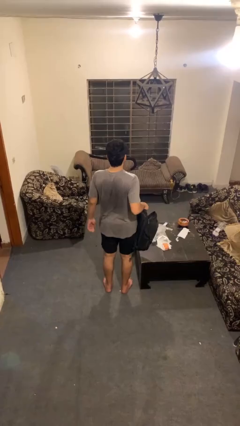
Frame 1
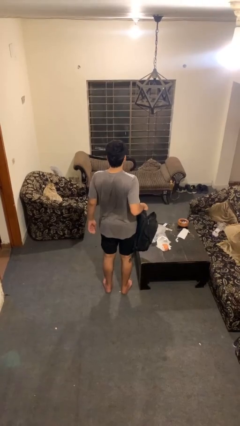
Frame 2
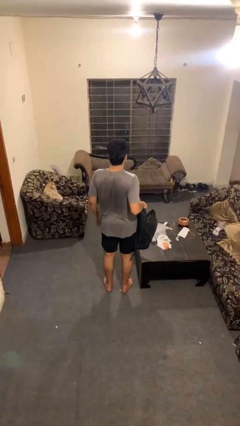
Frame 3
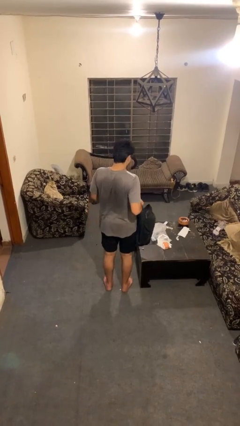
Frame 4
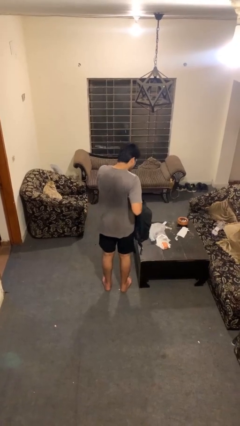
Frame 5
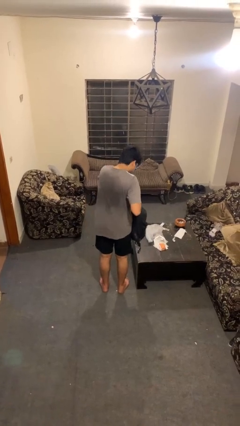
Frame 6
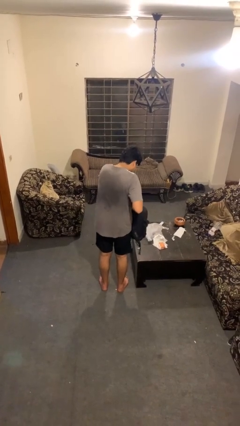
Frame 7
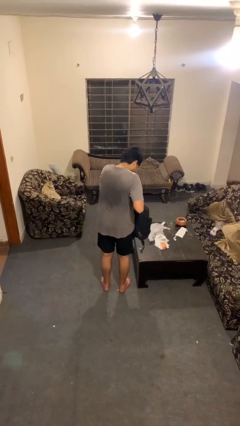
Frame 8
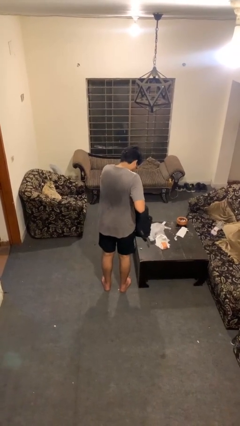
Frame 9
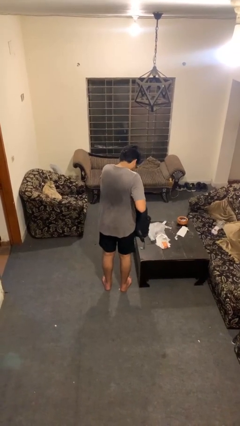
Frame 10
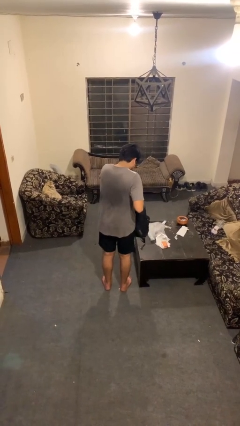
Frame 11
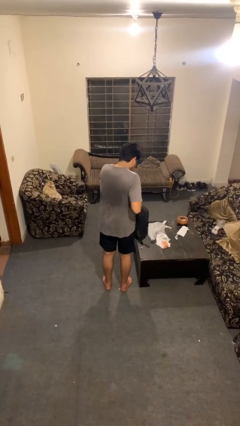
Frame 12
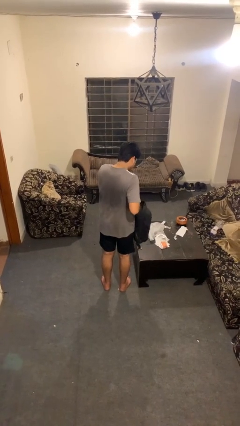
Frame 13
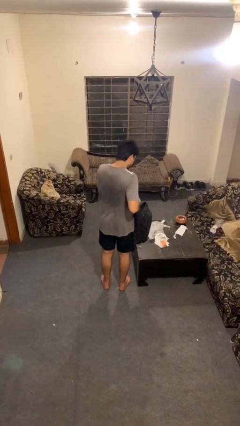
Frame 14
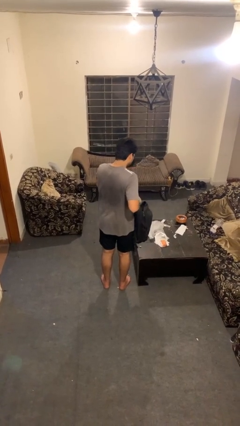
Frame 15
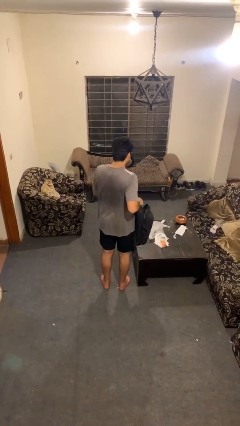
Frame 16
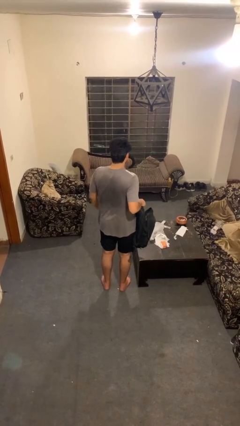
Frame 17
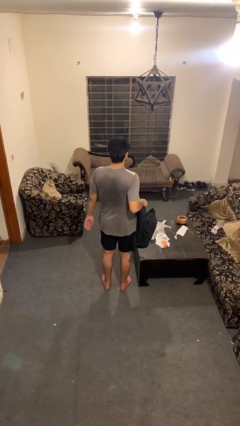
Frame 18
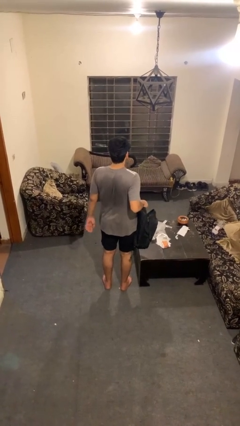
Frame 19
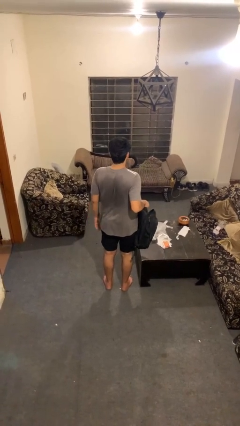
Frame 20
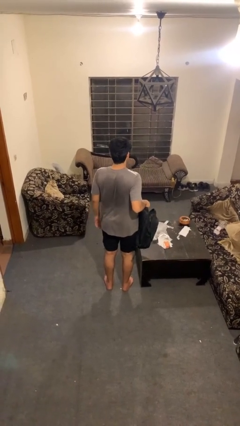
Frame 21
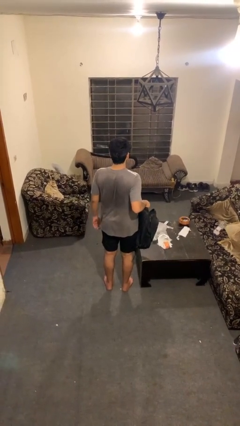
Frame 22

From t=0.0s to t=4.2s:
person searches in bag

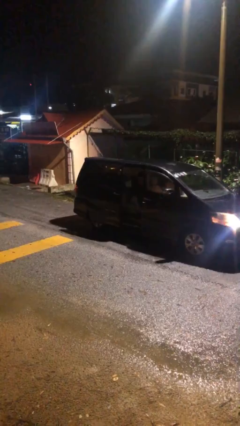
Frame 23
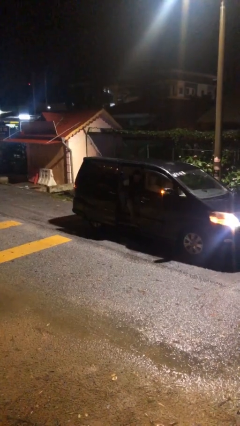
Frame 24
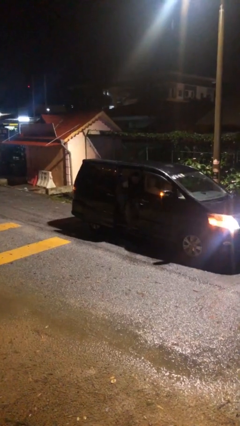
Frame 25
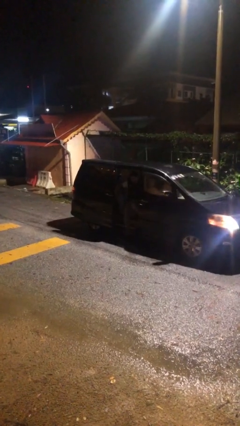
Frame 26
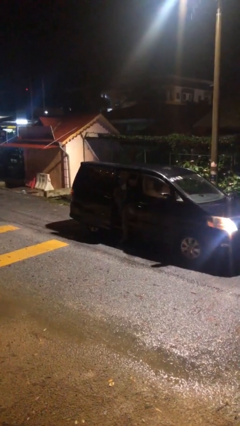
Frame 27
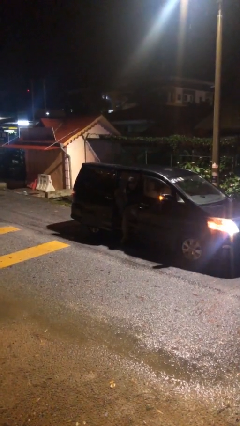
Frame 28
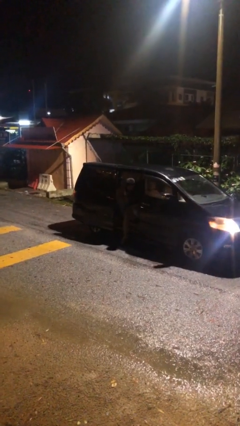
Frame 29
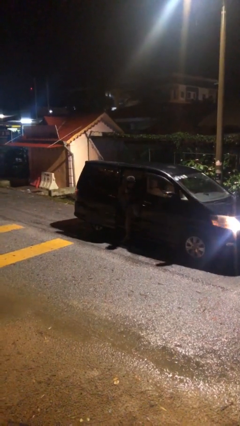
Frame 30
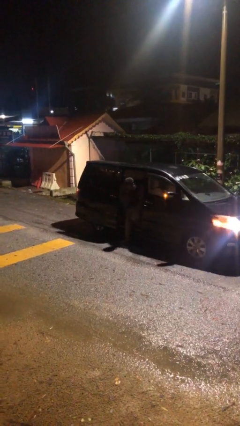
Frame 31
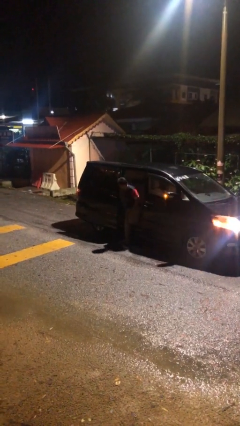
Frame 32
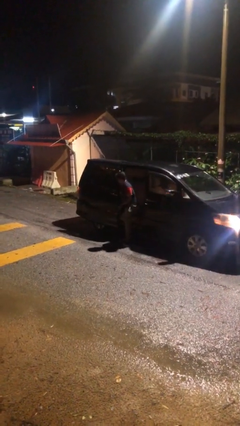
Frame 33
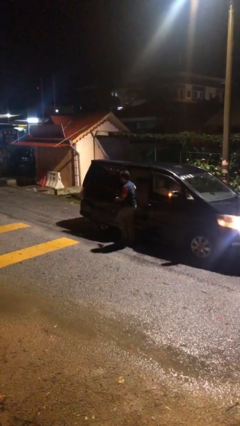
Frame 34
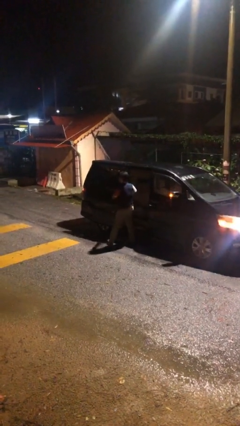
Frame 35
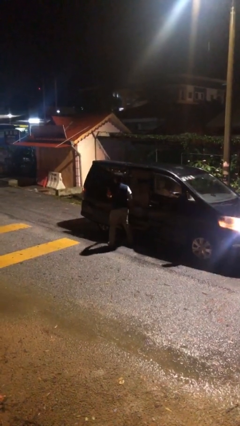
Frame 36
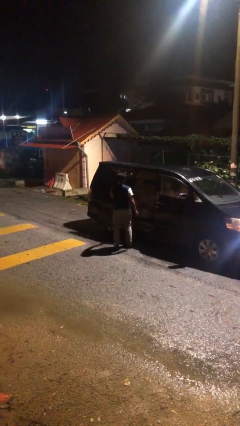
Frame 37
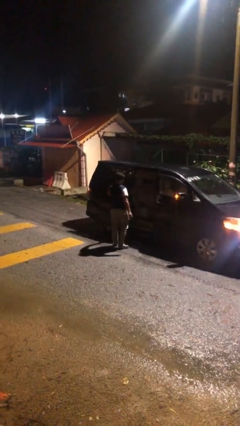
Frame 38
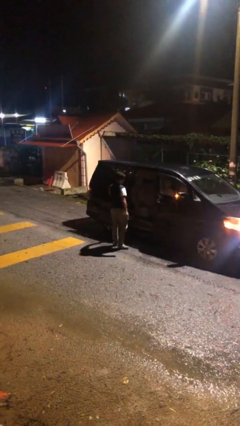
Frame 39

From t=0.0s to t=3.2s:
person exits car

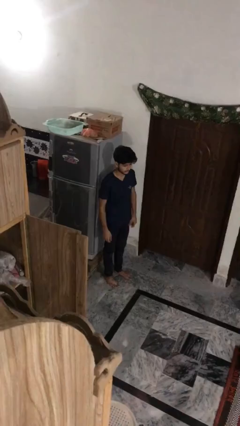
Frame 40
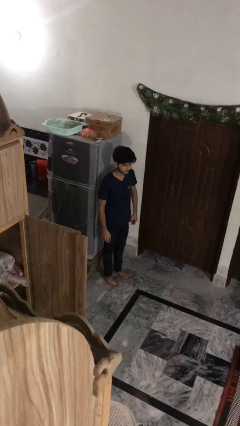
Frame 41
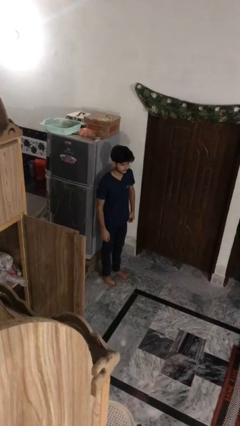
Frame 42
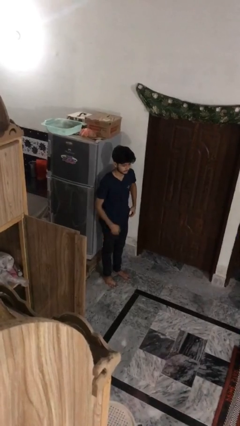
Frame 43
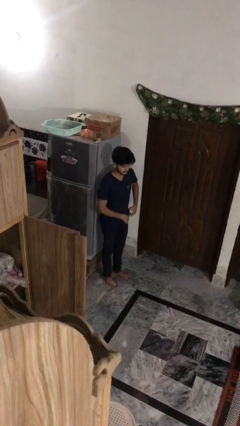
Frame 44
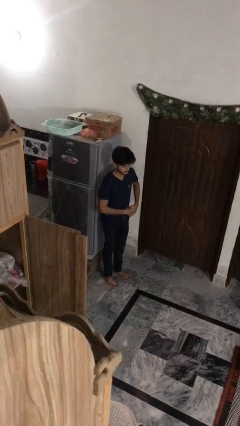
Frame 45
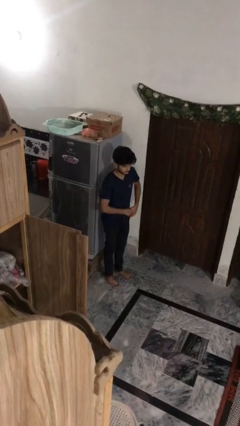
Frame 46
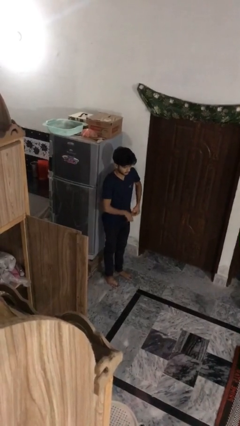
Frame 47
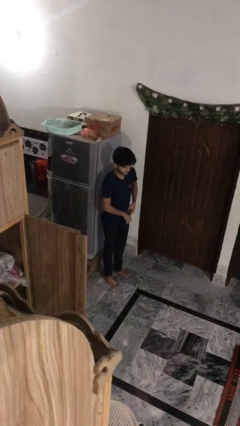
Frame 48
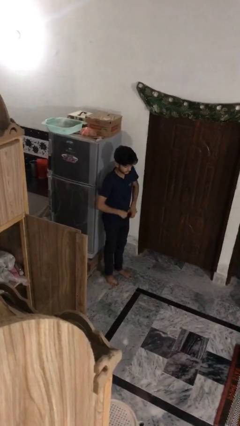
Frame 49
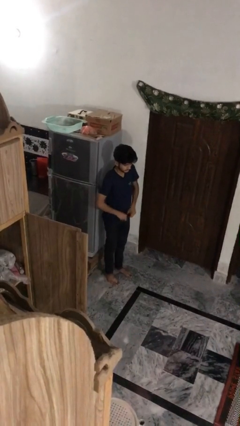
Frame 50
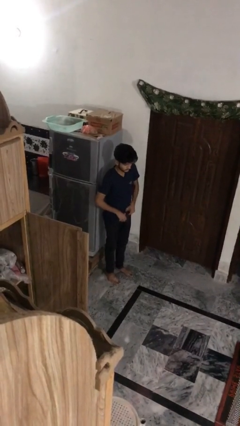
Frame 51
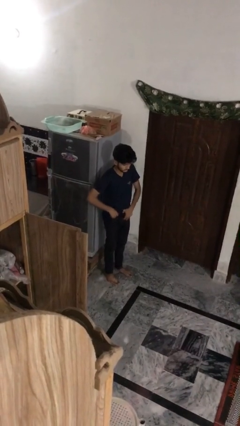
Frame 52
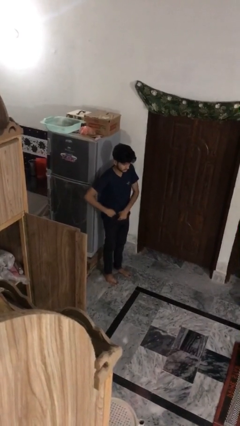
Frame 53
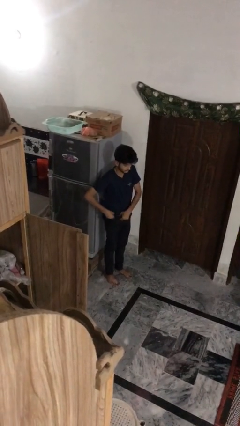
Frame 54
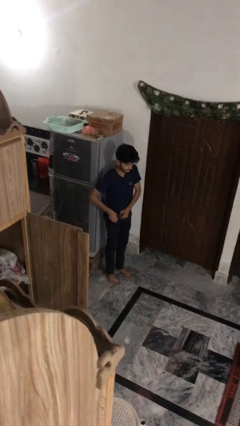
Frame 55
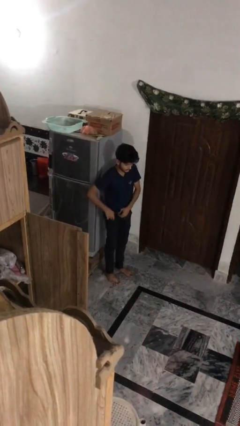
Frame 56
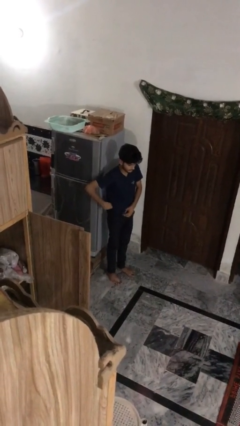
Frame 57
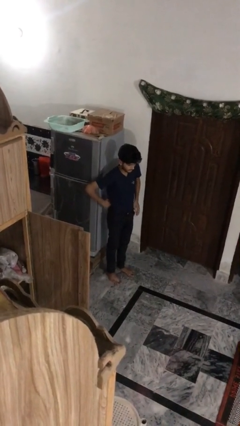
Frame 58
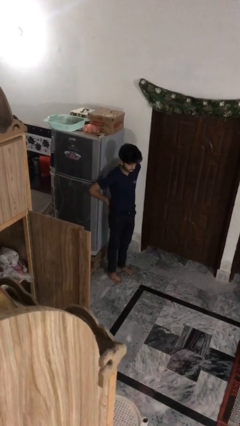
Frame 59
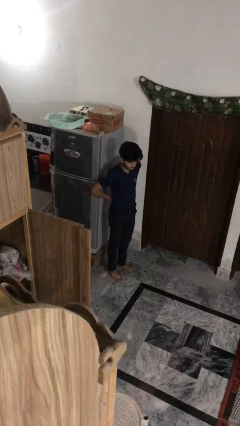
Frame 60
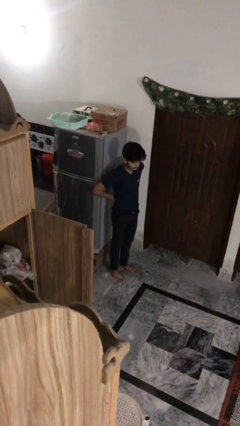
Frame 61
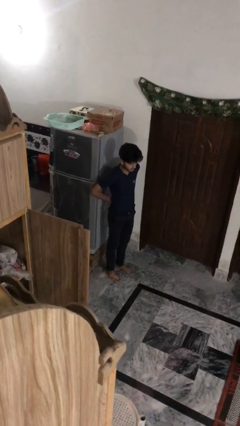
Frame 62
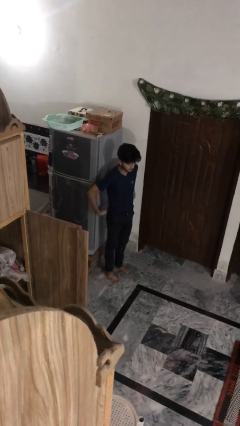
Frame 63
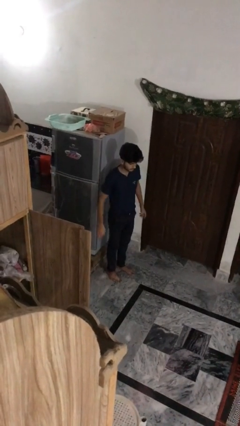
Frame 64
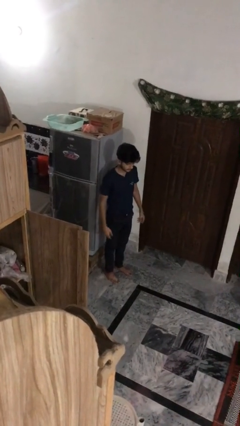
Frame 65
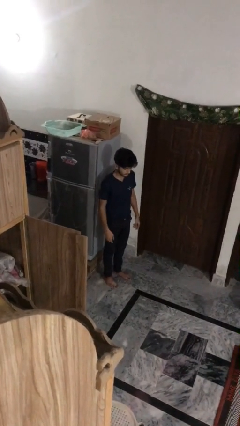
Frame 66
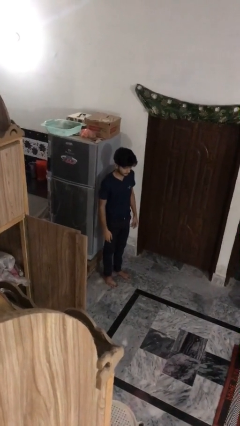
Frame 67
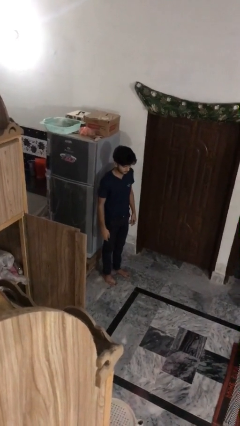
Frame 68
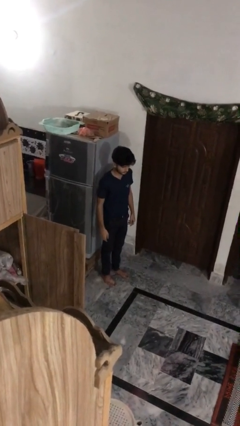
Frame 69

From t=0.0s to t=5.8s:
person tucks in shirt

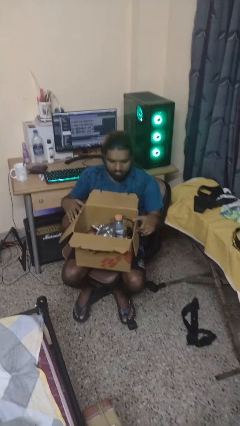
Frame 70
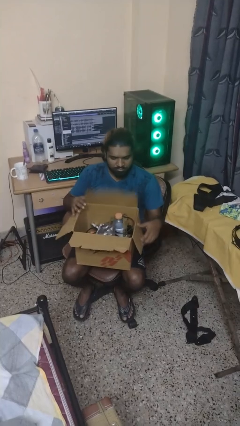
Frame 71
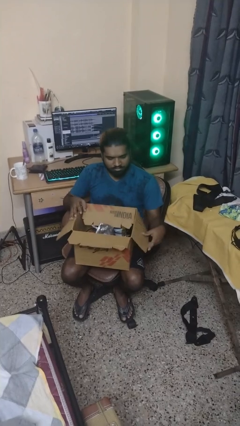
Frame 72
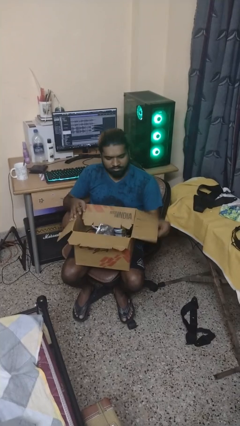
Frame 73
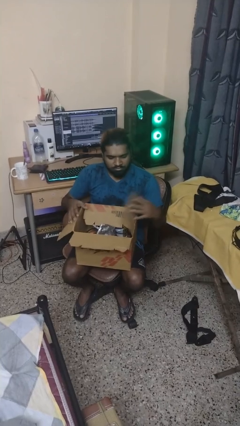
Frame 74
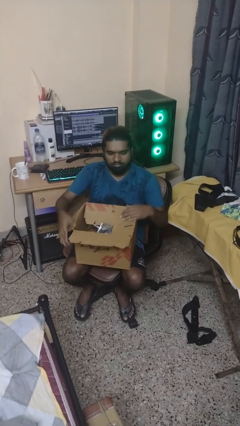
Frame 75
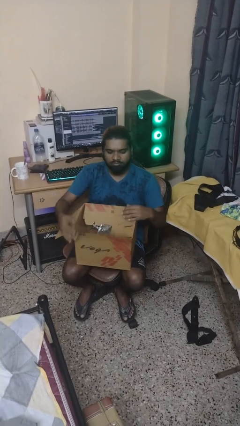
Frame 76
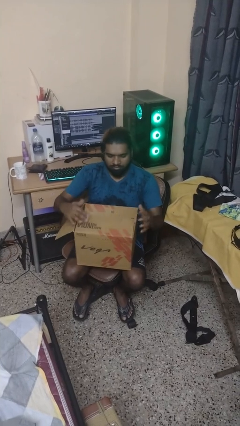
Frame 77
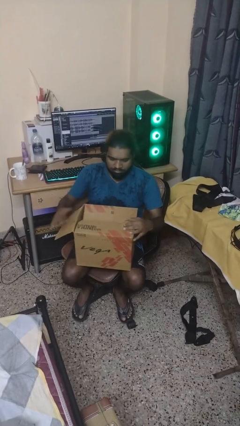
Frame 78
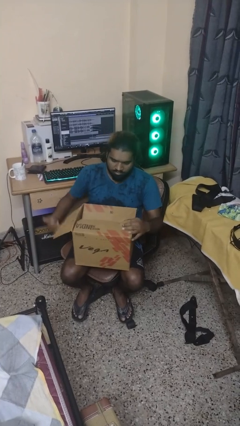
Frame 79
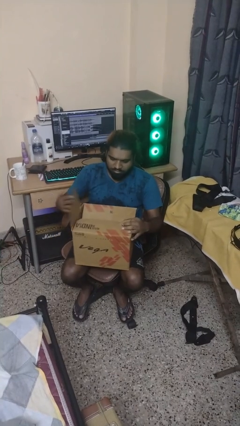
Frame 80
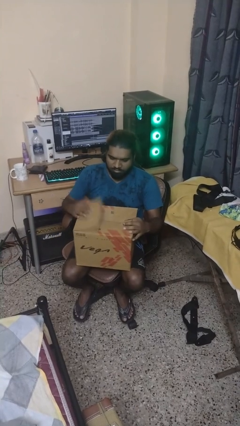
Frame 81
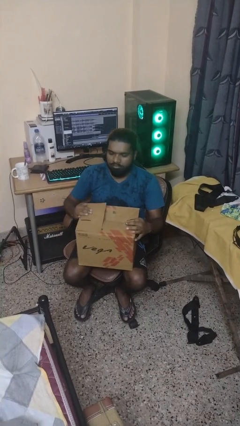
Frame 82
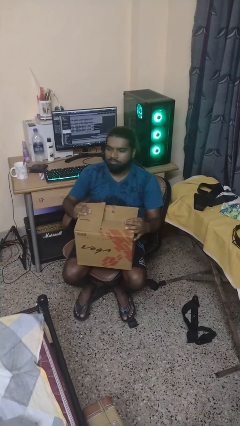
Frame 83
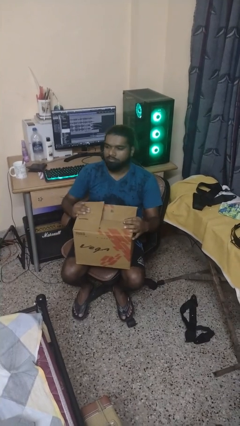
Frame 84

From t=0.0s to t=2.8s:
person closes box

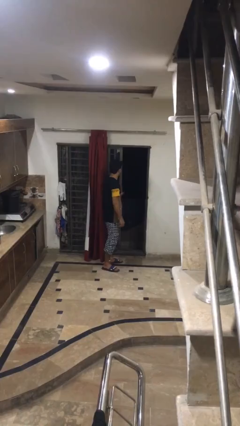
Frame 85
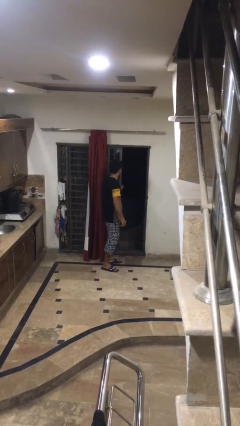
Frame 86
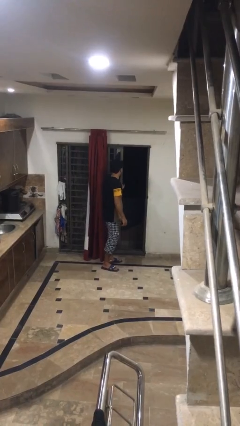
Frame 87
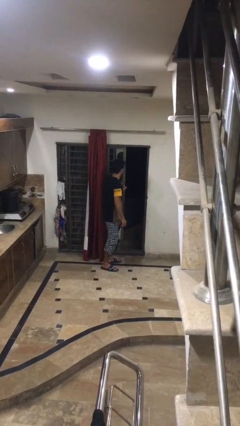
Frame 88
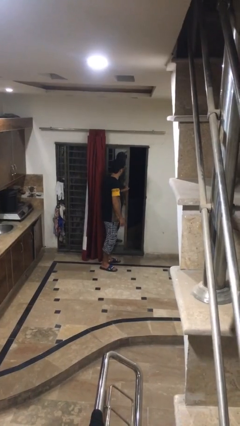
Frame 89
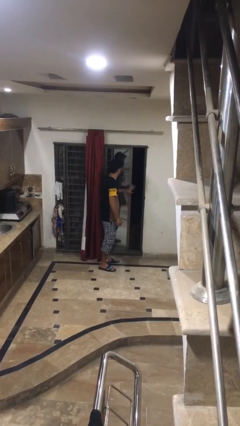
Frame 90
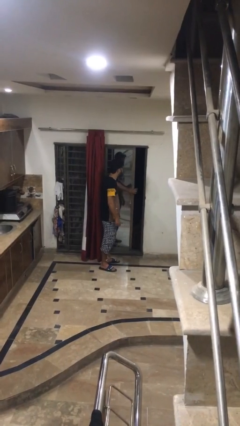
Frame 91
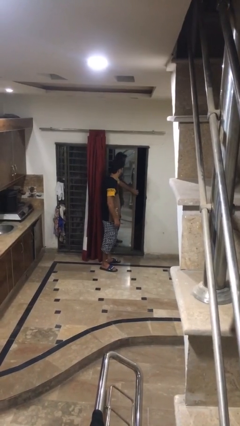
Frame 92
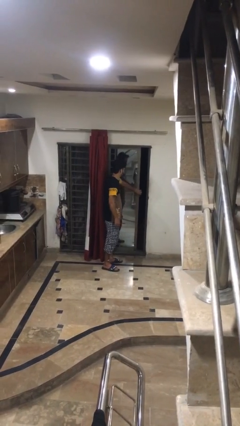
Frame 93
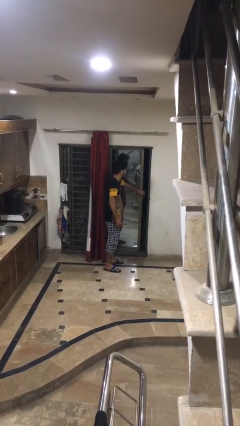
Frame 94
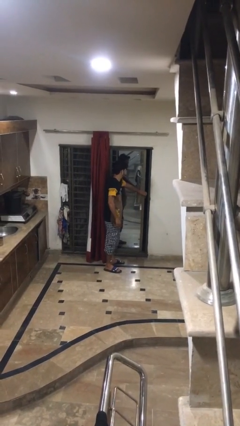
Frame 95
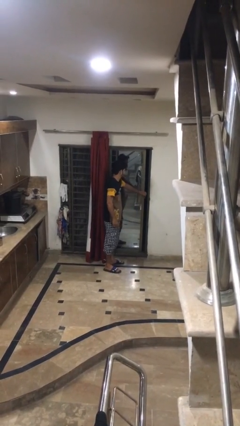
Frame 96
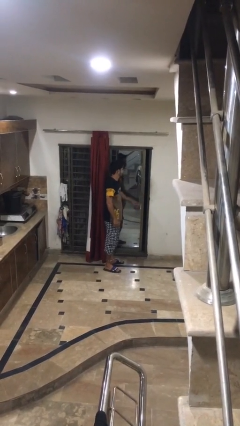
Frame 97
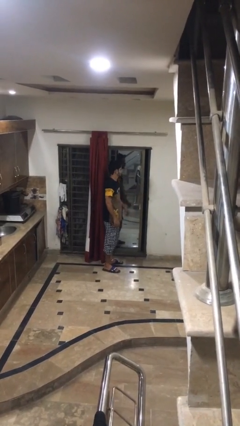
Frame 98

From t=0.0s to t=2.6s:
person closes home window
